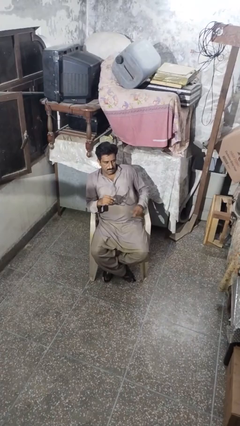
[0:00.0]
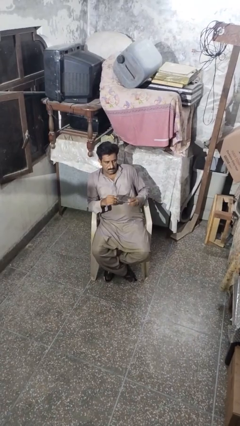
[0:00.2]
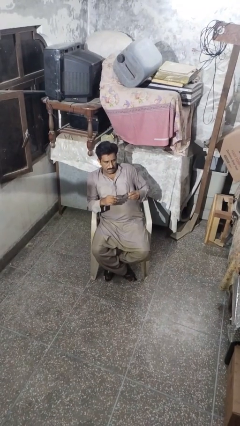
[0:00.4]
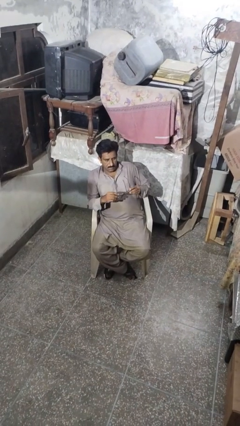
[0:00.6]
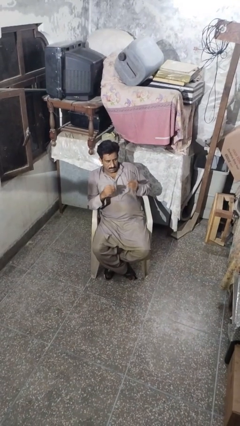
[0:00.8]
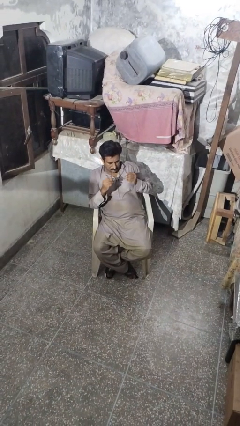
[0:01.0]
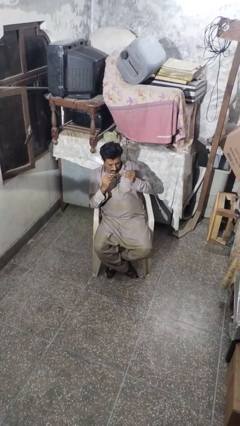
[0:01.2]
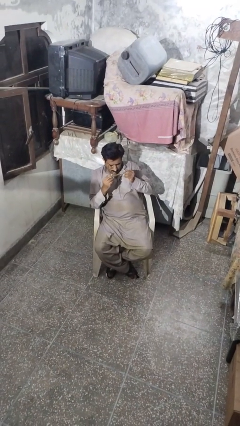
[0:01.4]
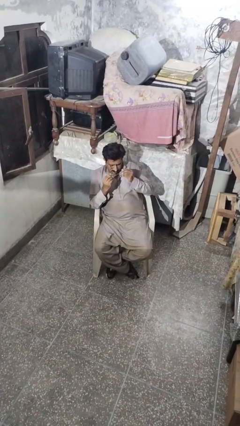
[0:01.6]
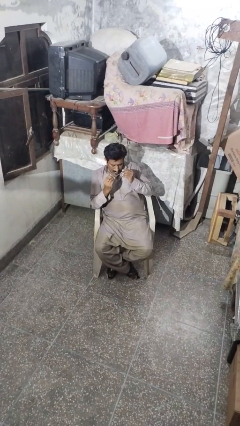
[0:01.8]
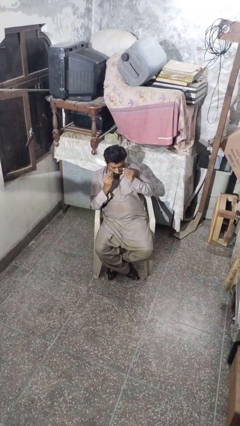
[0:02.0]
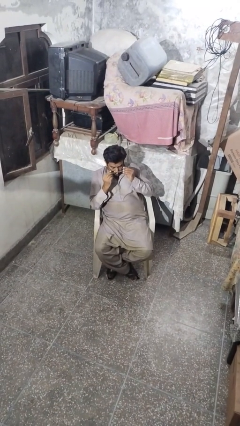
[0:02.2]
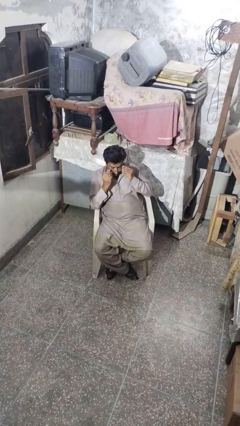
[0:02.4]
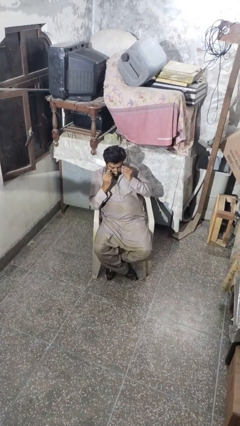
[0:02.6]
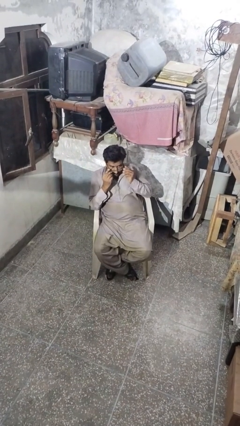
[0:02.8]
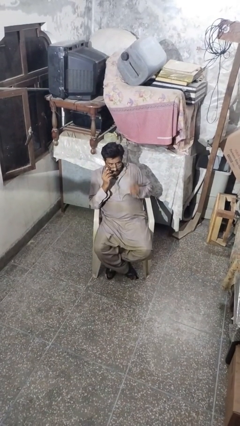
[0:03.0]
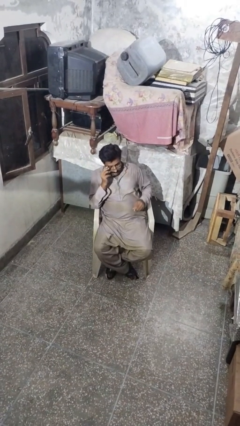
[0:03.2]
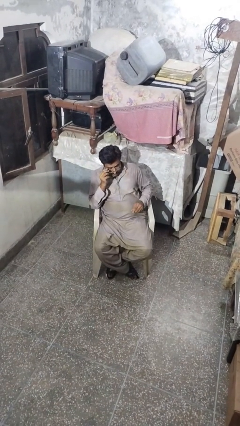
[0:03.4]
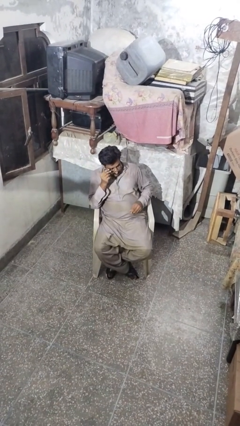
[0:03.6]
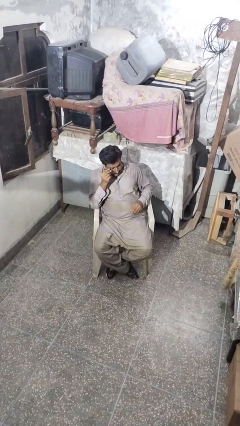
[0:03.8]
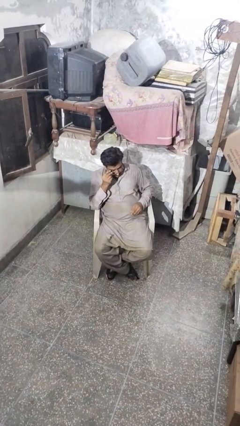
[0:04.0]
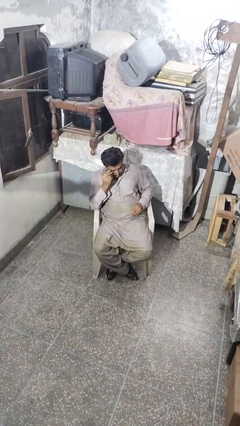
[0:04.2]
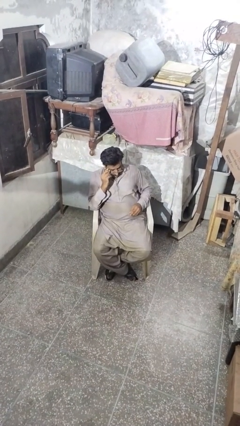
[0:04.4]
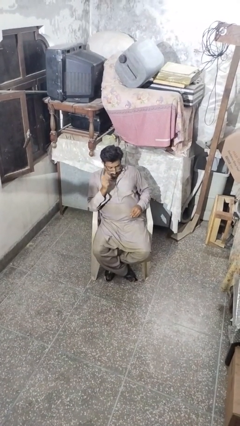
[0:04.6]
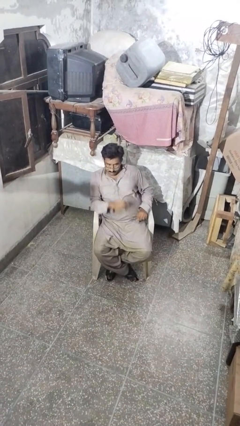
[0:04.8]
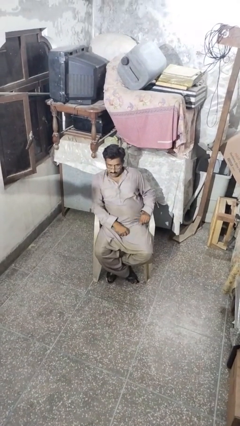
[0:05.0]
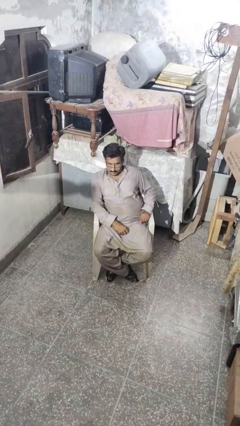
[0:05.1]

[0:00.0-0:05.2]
person puts on glasses

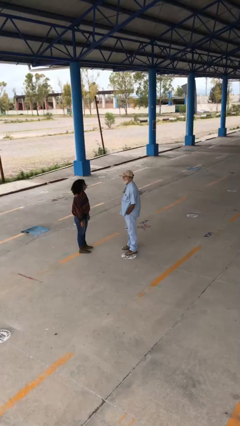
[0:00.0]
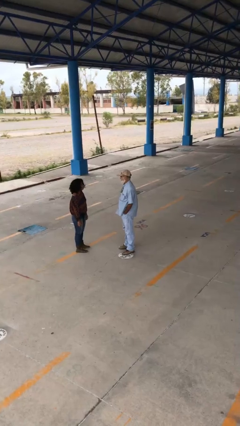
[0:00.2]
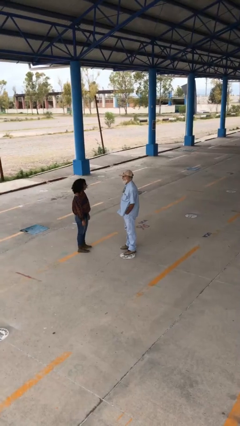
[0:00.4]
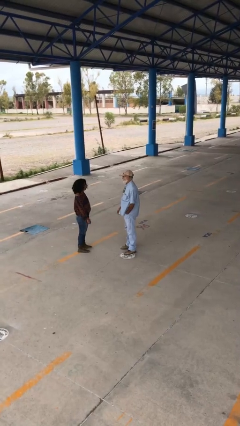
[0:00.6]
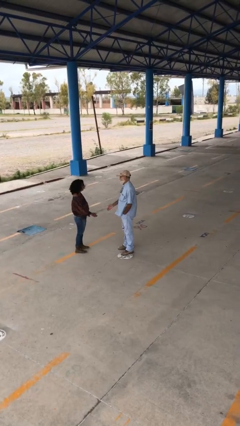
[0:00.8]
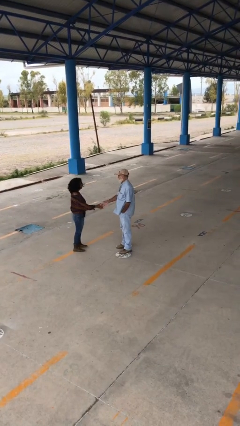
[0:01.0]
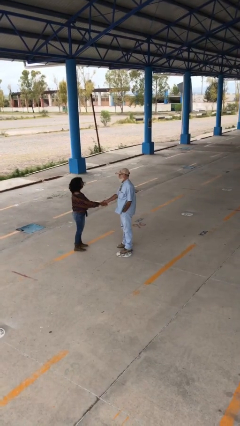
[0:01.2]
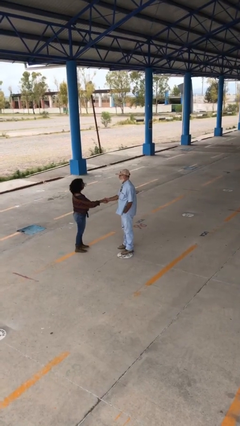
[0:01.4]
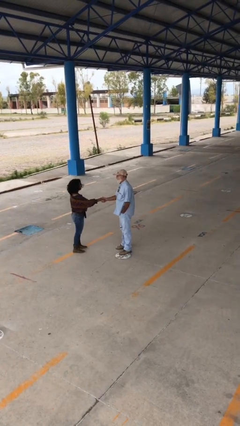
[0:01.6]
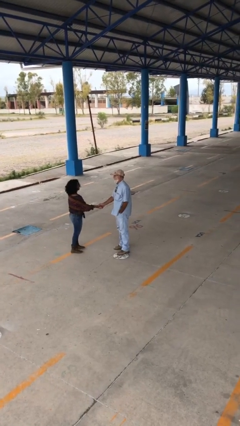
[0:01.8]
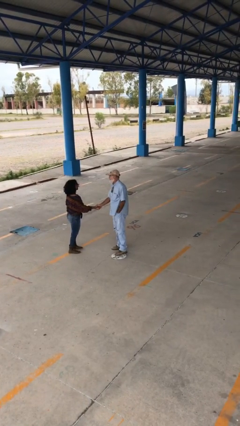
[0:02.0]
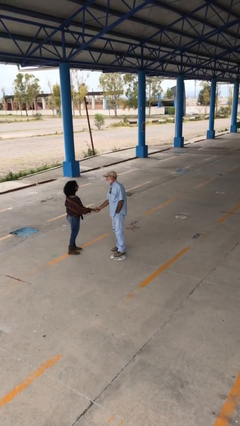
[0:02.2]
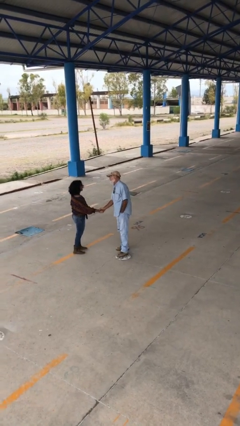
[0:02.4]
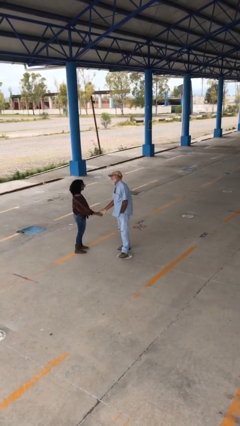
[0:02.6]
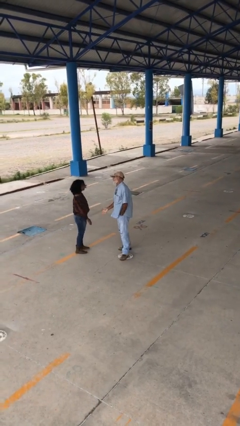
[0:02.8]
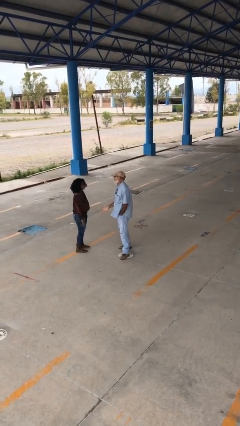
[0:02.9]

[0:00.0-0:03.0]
person shakes hand

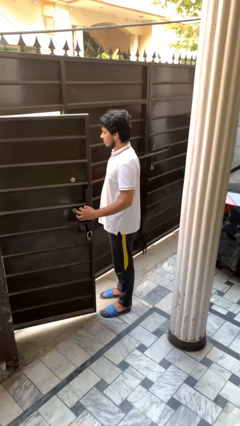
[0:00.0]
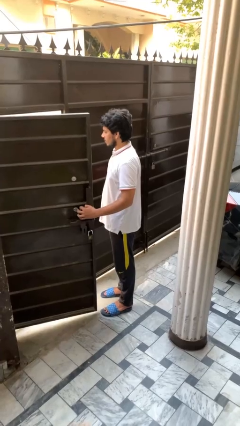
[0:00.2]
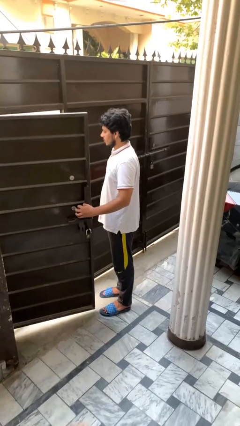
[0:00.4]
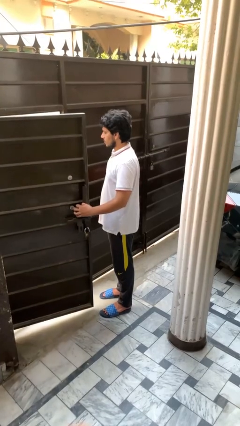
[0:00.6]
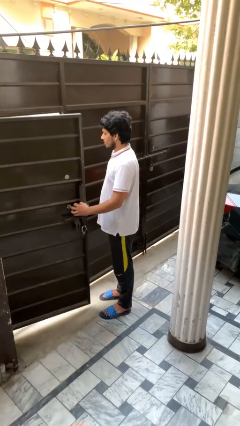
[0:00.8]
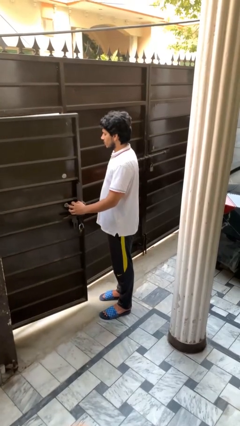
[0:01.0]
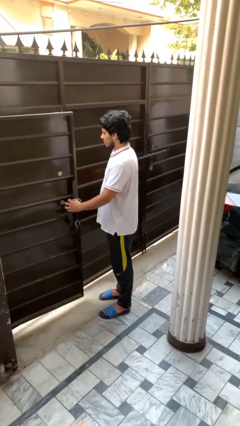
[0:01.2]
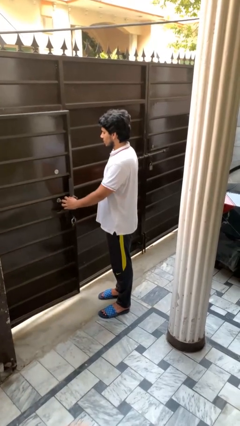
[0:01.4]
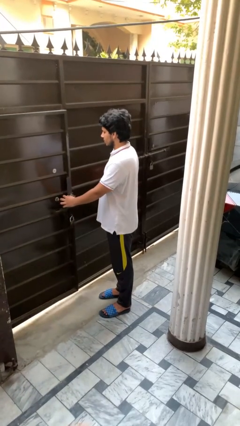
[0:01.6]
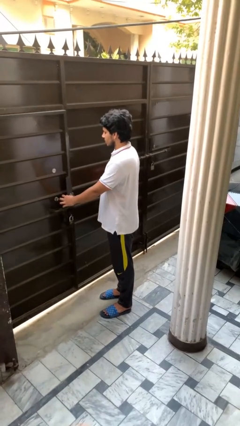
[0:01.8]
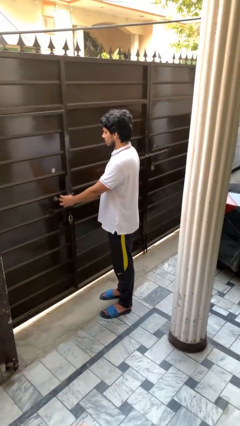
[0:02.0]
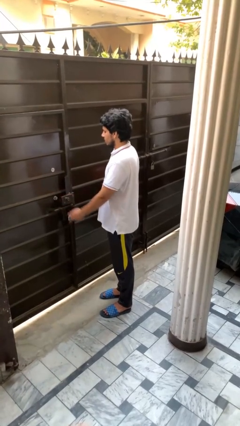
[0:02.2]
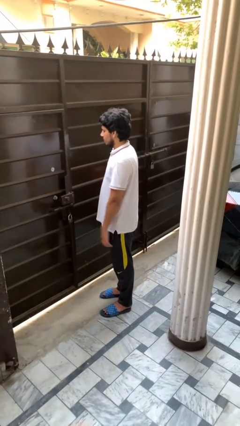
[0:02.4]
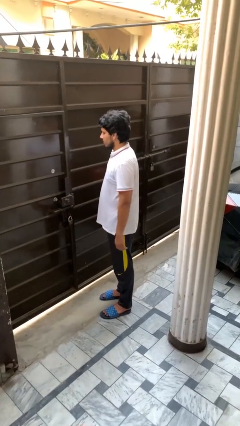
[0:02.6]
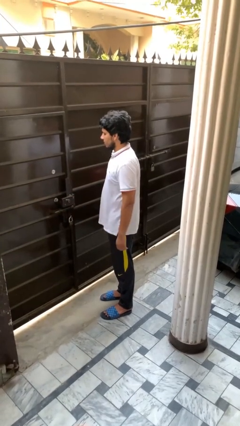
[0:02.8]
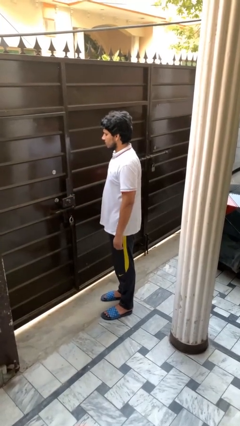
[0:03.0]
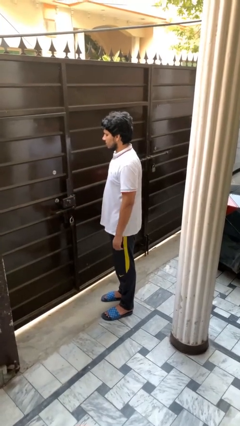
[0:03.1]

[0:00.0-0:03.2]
person closes gate

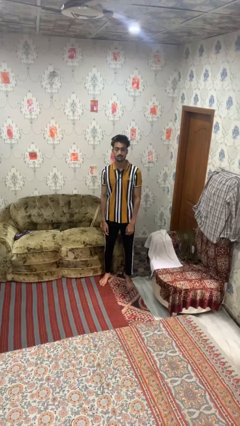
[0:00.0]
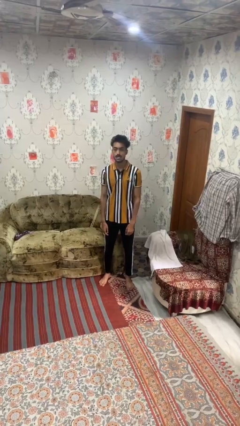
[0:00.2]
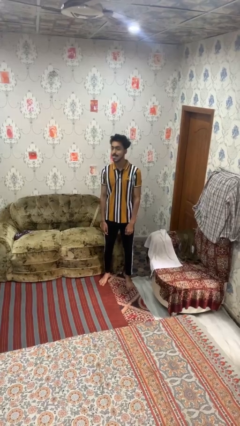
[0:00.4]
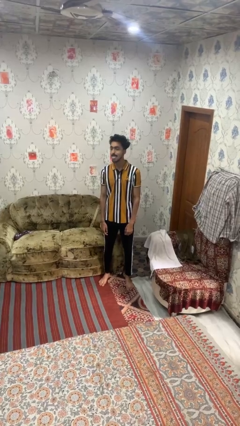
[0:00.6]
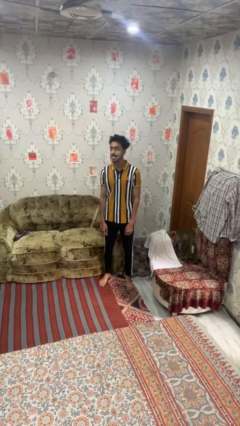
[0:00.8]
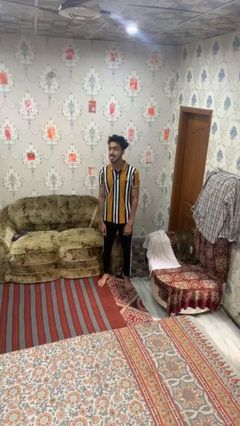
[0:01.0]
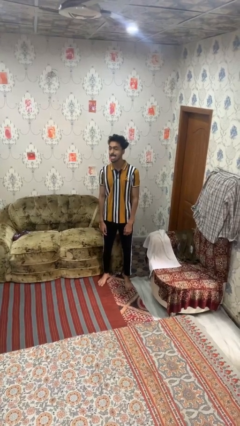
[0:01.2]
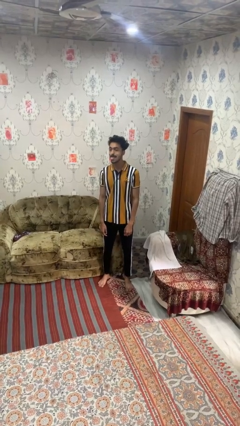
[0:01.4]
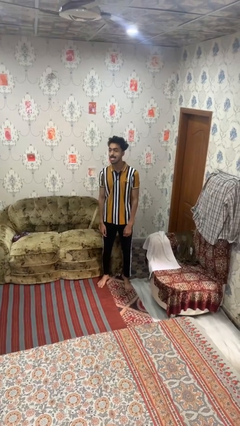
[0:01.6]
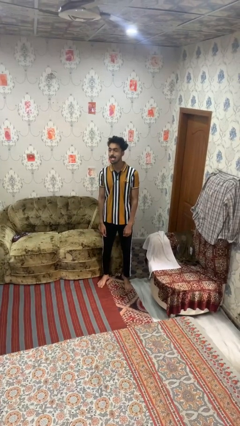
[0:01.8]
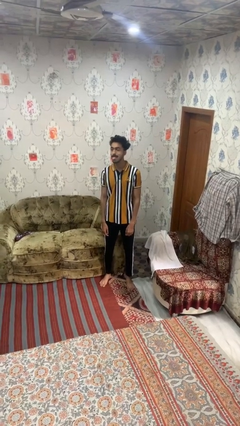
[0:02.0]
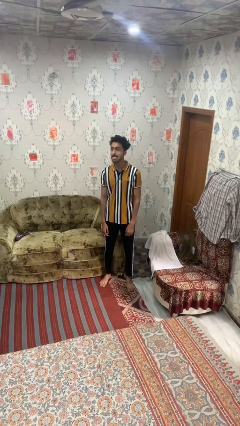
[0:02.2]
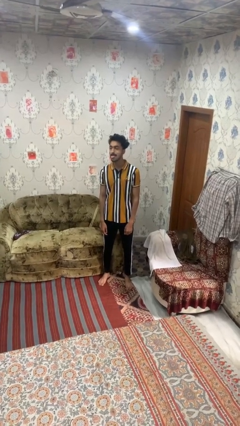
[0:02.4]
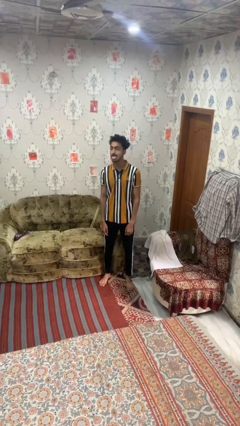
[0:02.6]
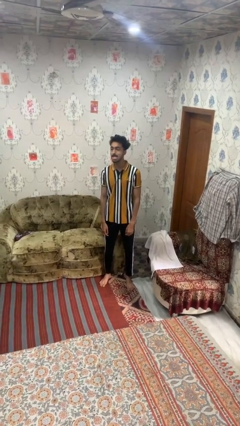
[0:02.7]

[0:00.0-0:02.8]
person sticks out tongue

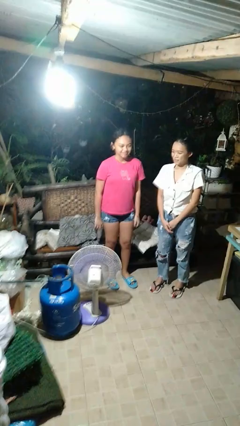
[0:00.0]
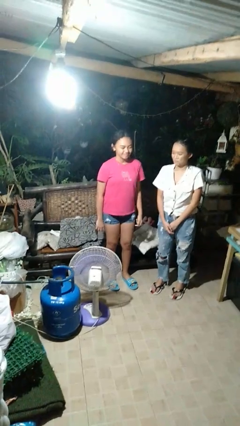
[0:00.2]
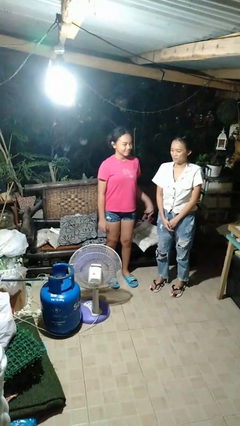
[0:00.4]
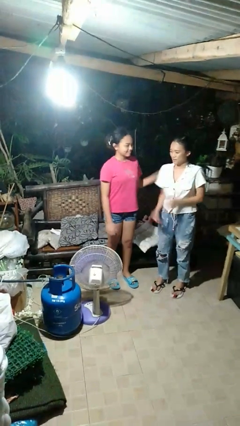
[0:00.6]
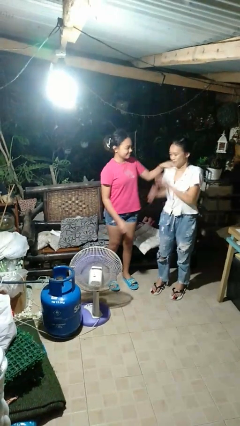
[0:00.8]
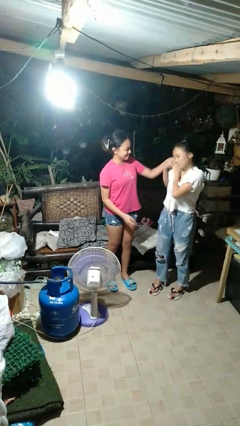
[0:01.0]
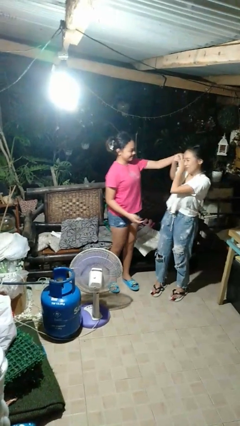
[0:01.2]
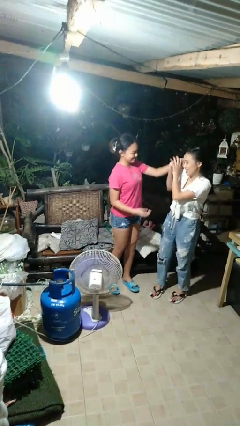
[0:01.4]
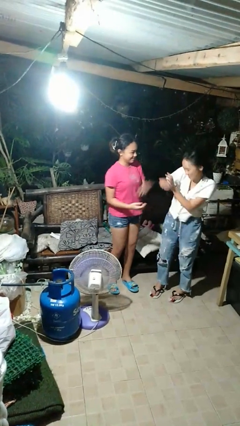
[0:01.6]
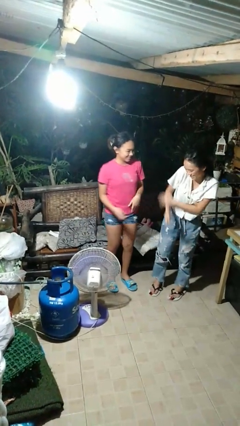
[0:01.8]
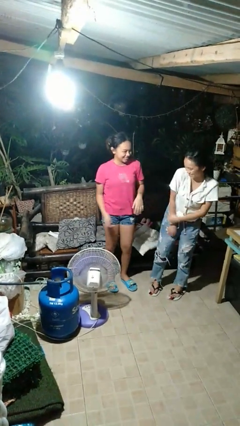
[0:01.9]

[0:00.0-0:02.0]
person tickles person

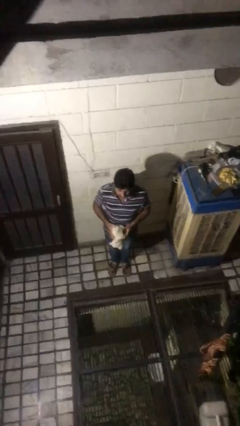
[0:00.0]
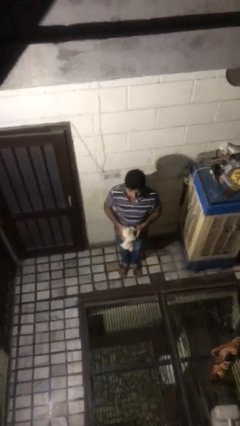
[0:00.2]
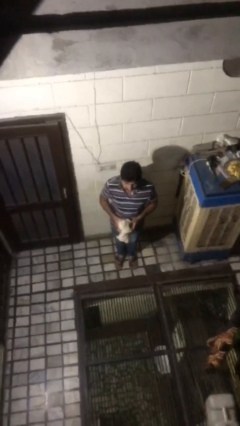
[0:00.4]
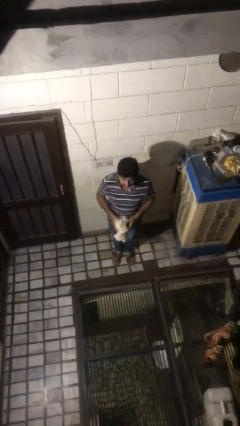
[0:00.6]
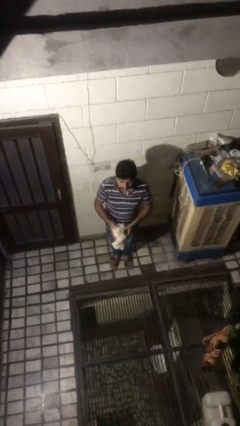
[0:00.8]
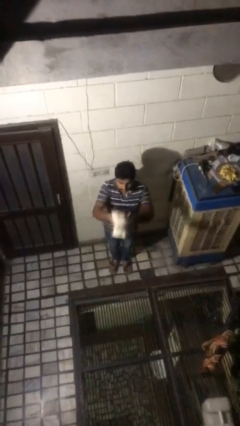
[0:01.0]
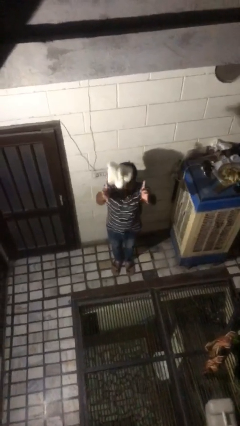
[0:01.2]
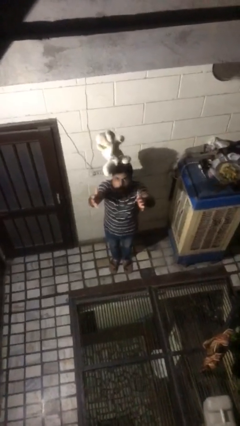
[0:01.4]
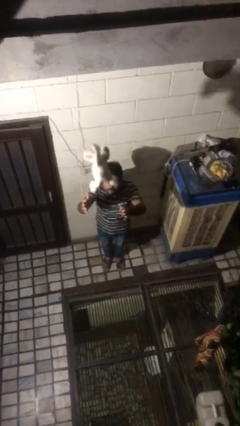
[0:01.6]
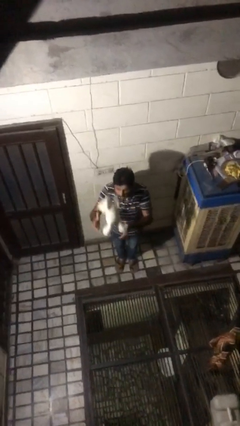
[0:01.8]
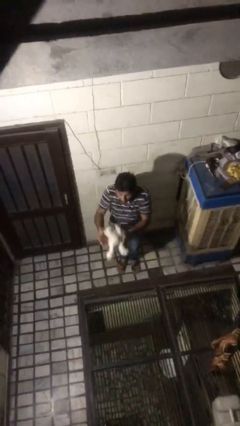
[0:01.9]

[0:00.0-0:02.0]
person drops object
